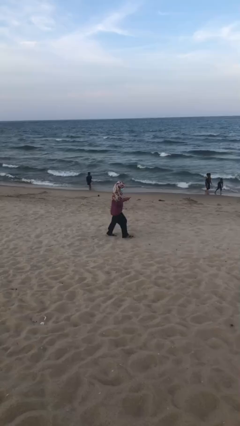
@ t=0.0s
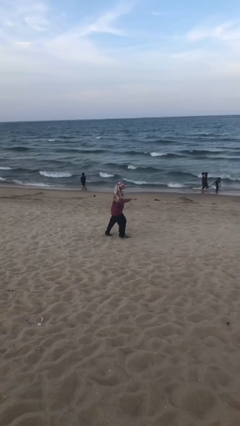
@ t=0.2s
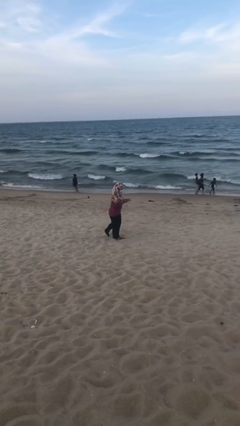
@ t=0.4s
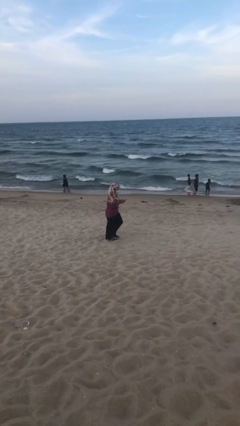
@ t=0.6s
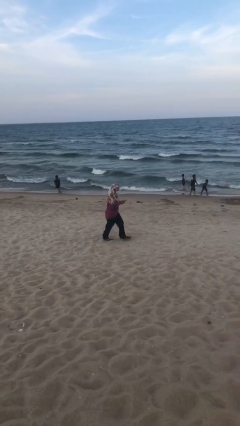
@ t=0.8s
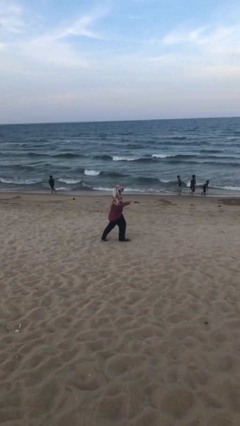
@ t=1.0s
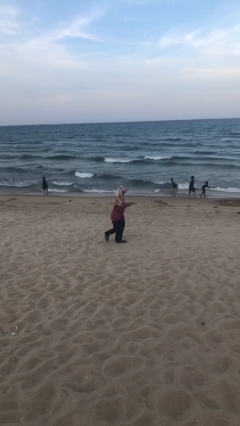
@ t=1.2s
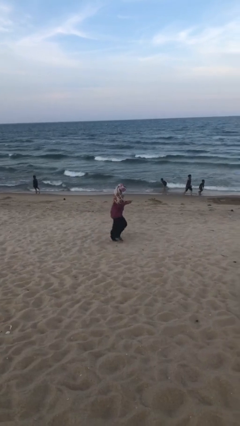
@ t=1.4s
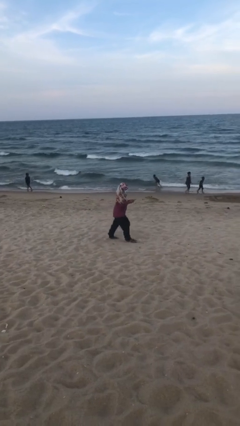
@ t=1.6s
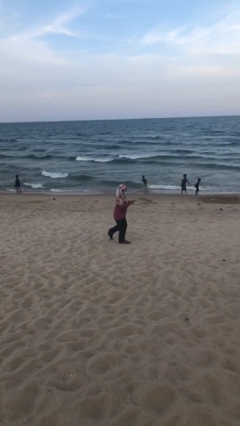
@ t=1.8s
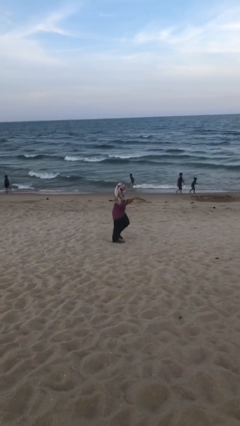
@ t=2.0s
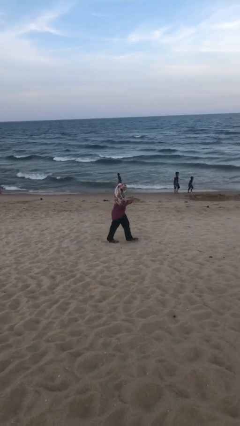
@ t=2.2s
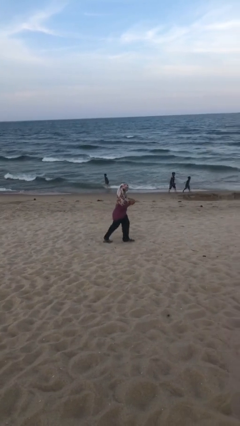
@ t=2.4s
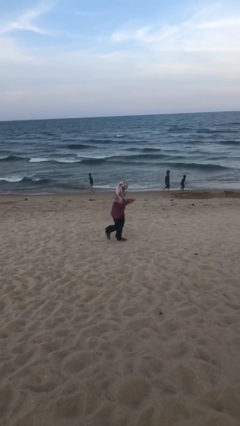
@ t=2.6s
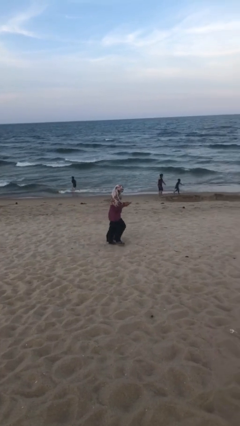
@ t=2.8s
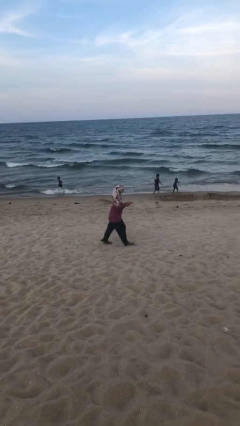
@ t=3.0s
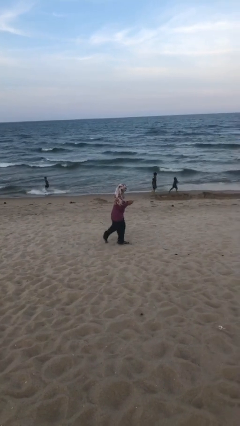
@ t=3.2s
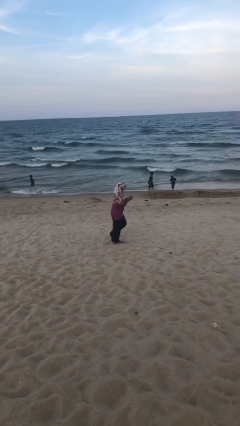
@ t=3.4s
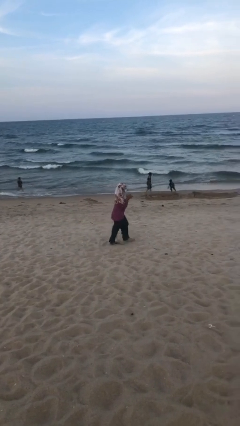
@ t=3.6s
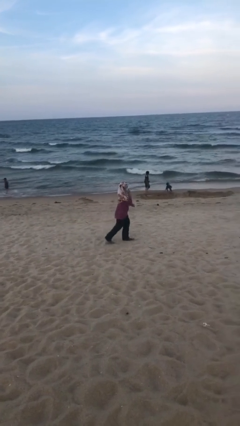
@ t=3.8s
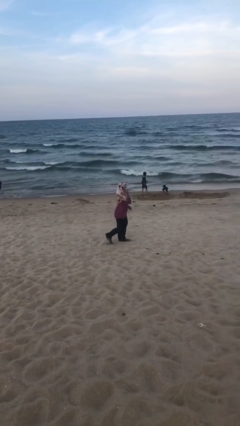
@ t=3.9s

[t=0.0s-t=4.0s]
person texts on phone

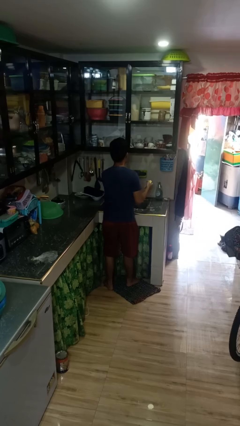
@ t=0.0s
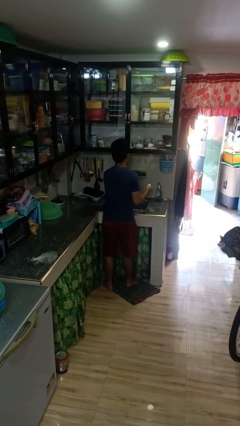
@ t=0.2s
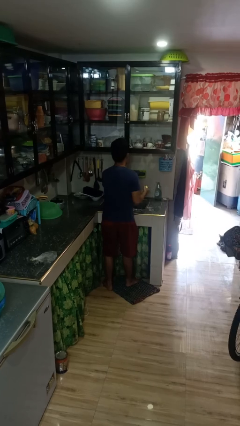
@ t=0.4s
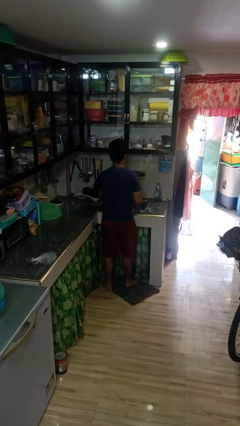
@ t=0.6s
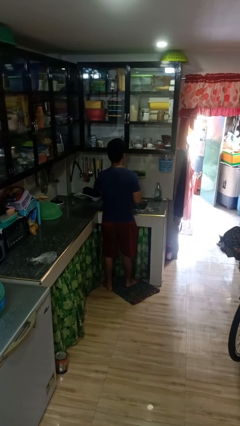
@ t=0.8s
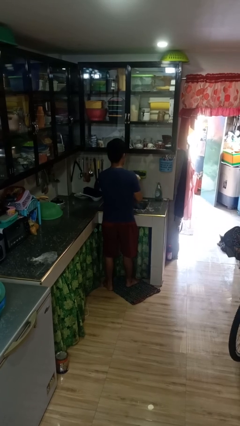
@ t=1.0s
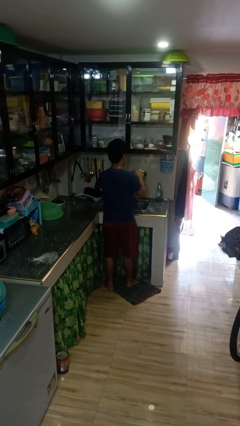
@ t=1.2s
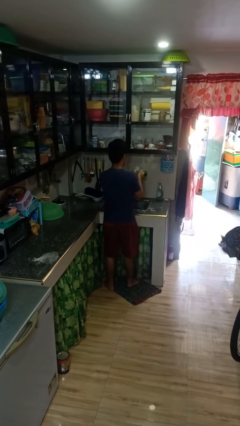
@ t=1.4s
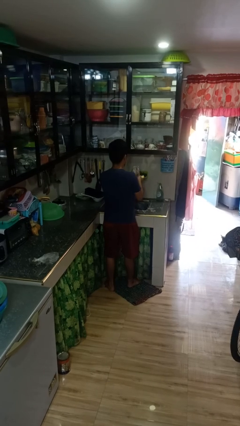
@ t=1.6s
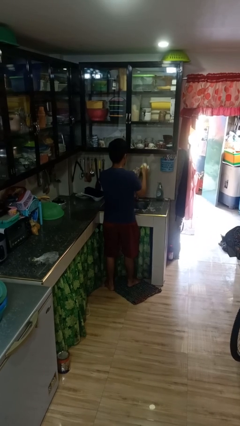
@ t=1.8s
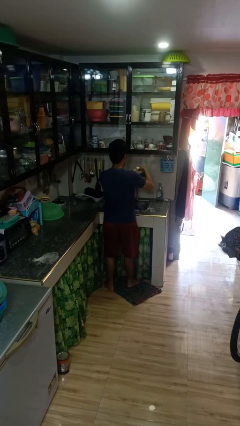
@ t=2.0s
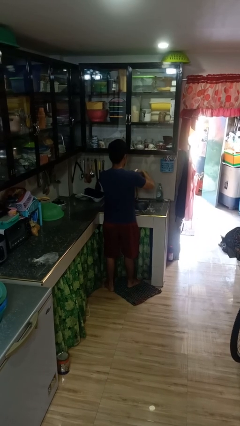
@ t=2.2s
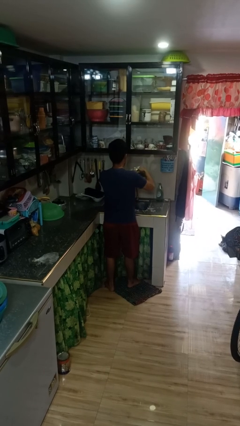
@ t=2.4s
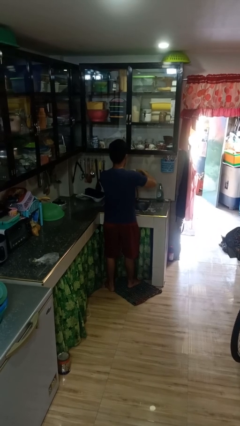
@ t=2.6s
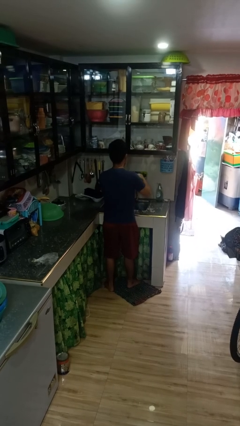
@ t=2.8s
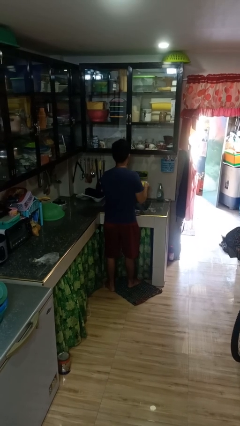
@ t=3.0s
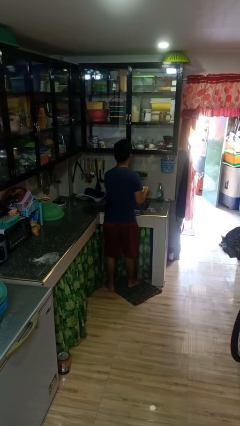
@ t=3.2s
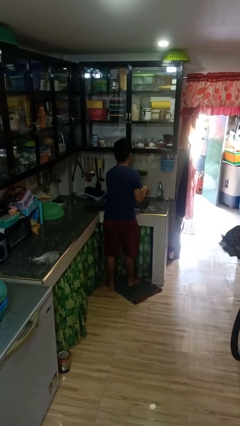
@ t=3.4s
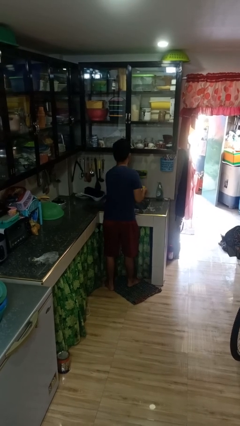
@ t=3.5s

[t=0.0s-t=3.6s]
person washes dish

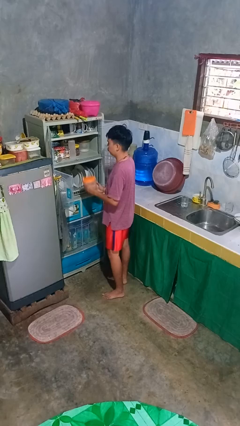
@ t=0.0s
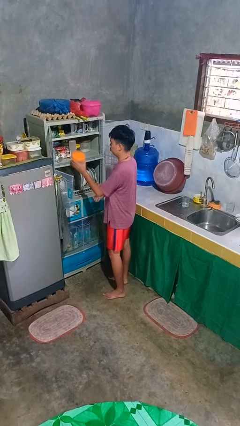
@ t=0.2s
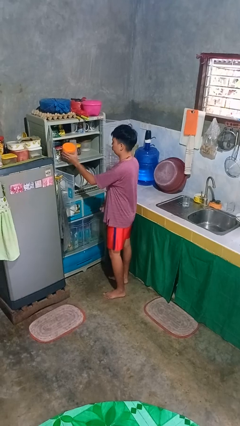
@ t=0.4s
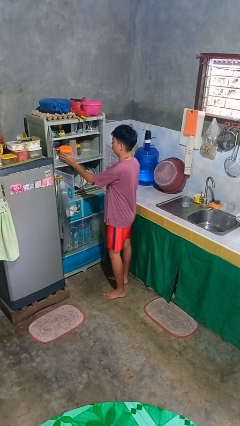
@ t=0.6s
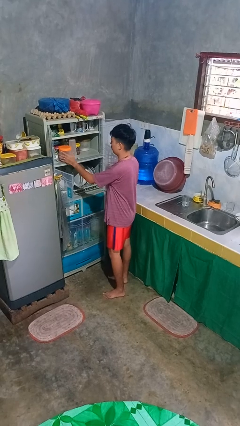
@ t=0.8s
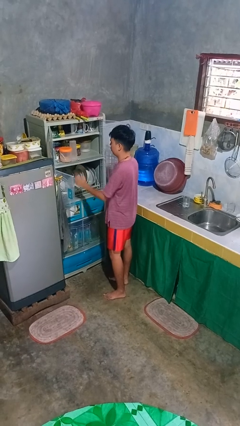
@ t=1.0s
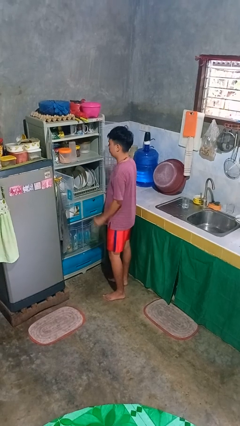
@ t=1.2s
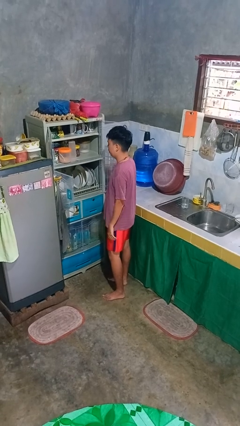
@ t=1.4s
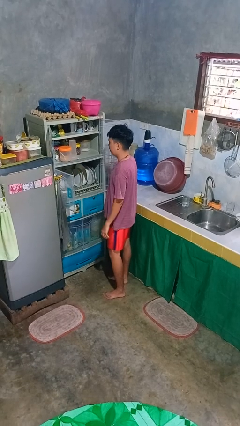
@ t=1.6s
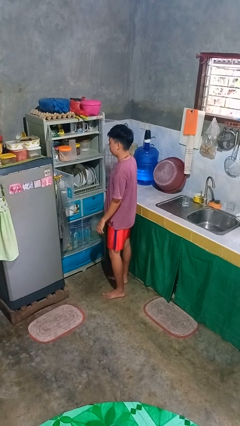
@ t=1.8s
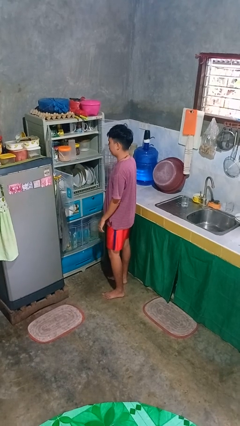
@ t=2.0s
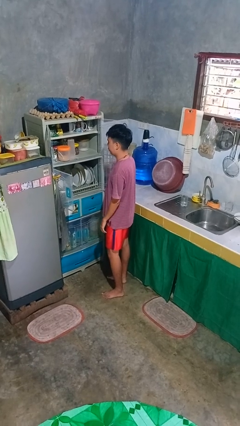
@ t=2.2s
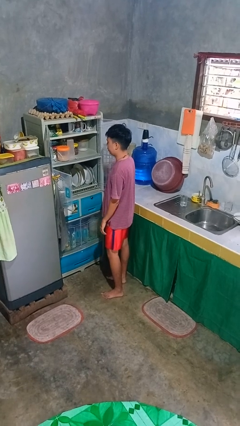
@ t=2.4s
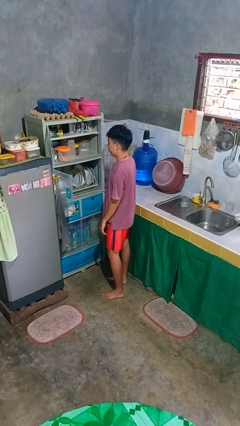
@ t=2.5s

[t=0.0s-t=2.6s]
person puts object in cabinet

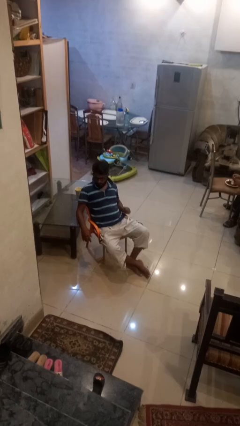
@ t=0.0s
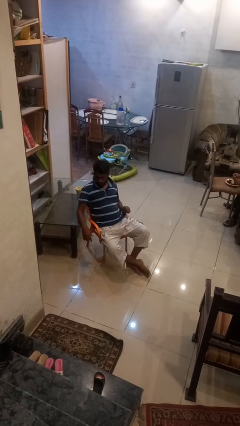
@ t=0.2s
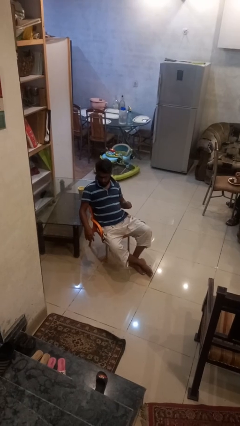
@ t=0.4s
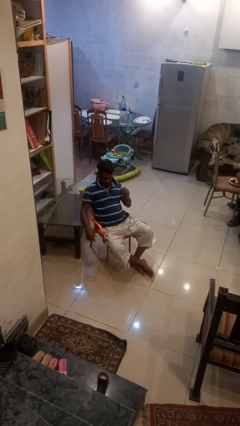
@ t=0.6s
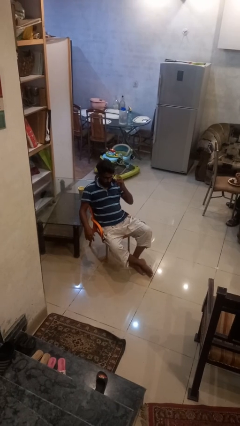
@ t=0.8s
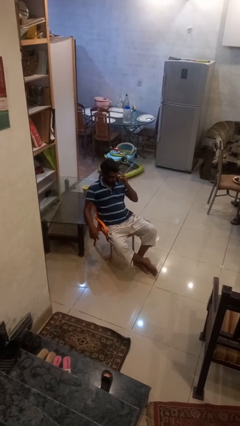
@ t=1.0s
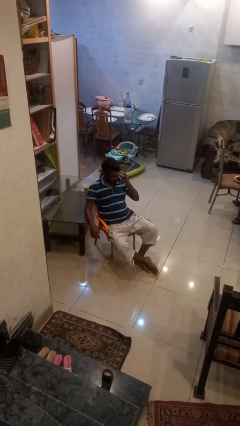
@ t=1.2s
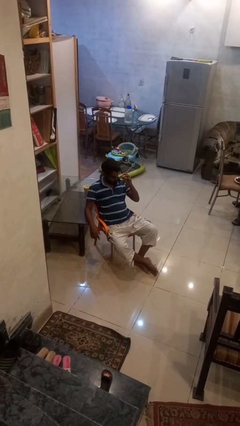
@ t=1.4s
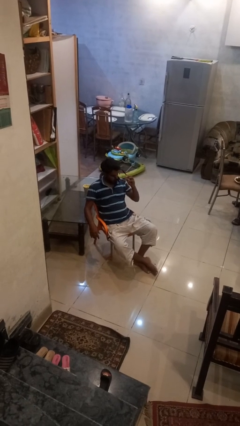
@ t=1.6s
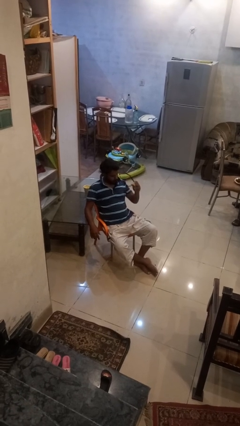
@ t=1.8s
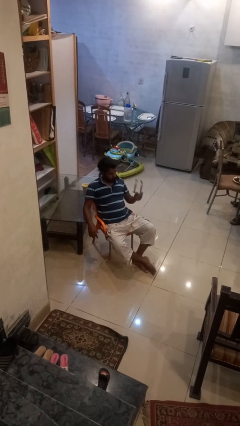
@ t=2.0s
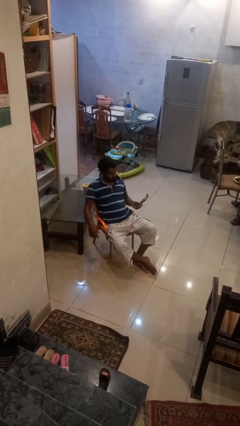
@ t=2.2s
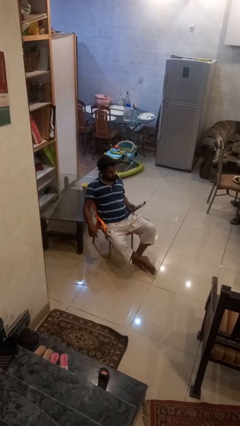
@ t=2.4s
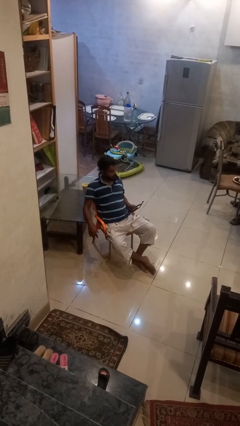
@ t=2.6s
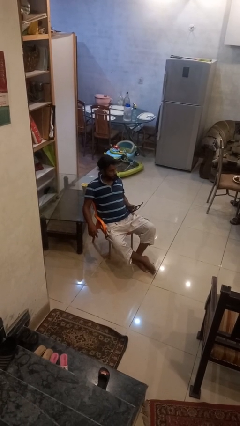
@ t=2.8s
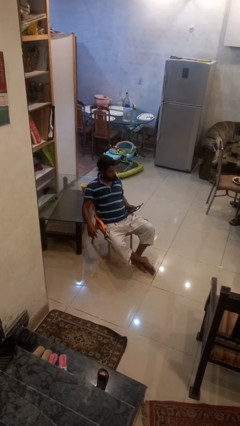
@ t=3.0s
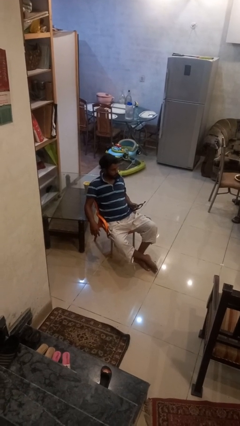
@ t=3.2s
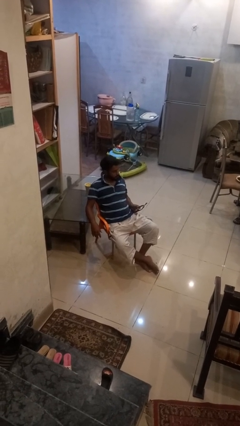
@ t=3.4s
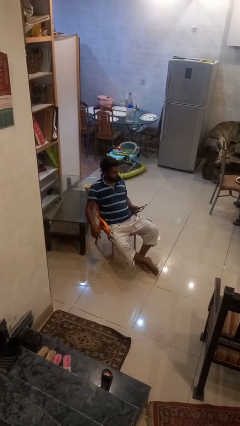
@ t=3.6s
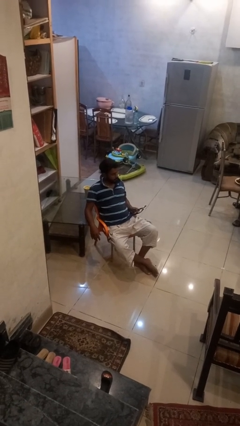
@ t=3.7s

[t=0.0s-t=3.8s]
person takes off glasses

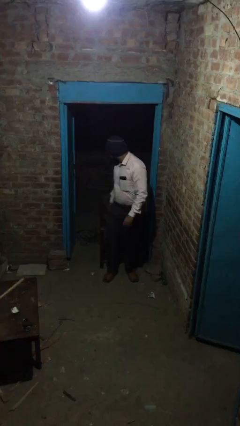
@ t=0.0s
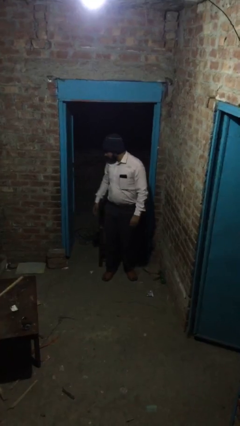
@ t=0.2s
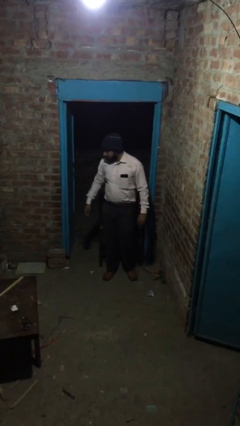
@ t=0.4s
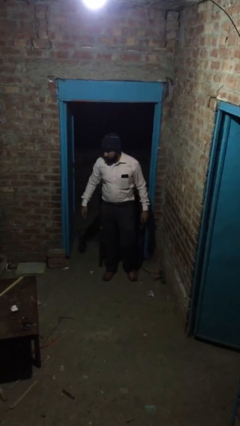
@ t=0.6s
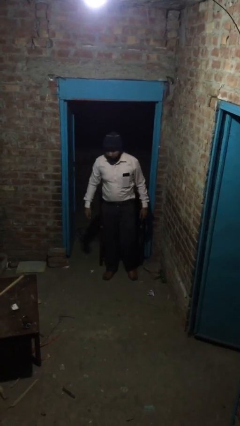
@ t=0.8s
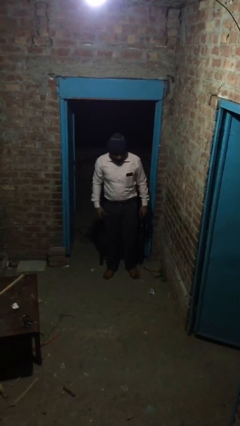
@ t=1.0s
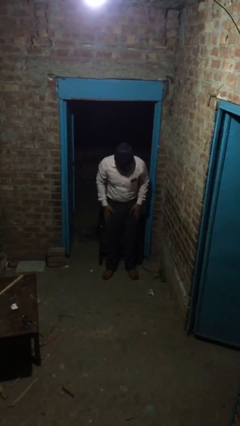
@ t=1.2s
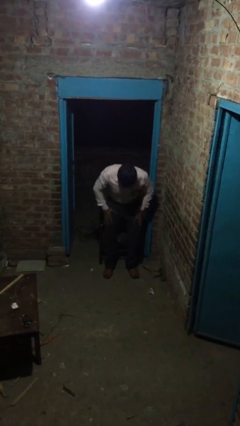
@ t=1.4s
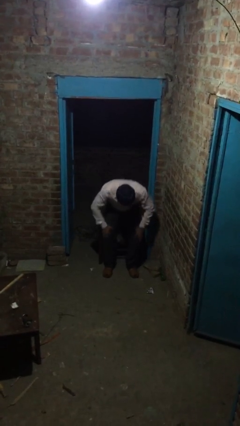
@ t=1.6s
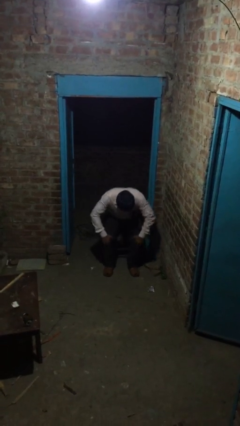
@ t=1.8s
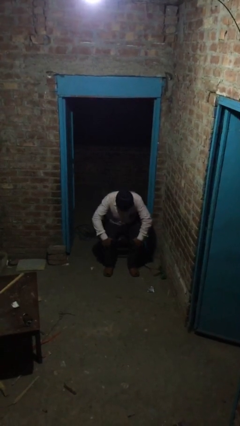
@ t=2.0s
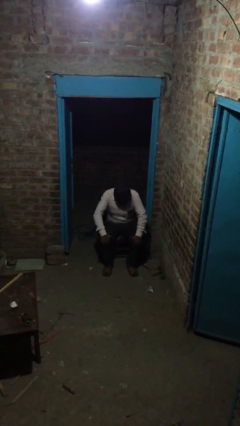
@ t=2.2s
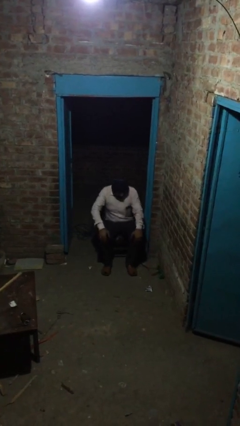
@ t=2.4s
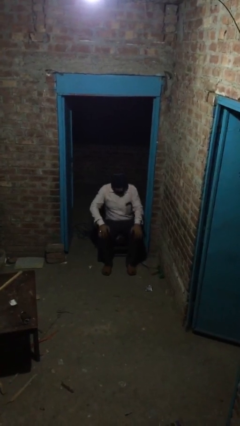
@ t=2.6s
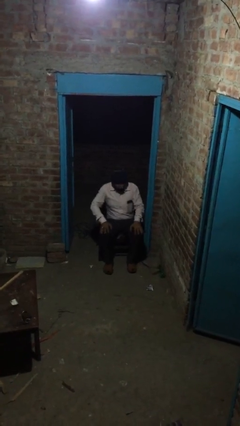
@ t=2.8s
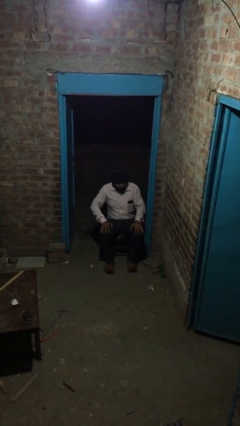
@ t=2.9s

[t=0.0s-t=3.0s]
person sits down

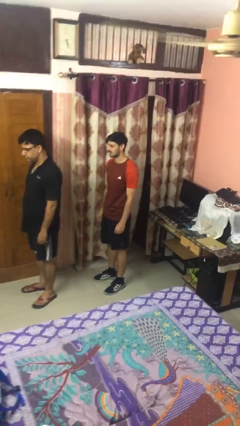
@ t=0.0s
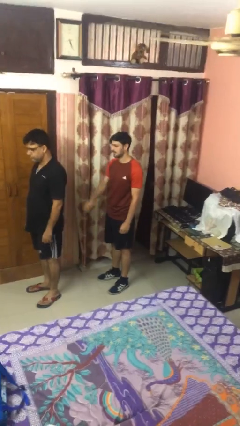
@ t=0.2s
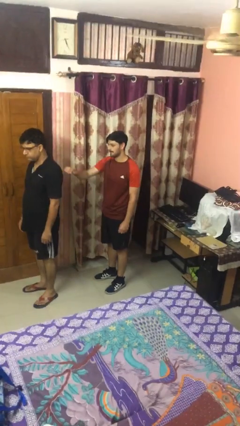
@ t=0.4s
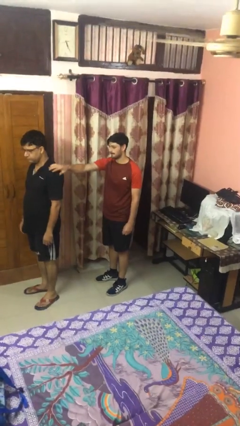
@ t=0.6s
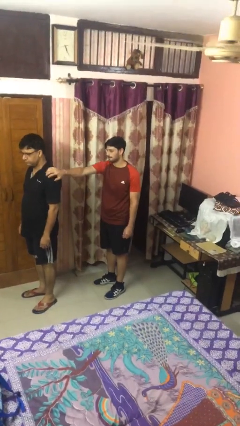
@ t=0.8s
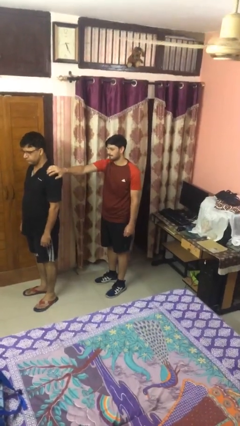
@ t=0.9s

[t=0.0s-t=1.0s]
person grabs person by shoulder
